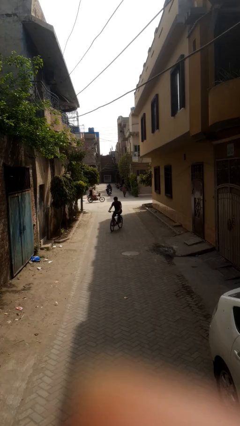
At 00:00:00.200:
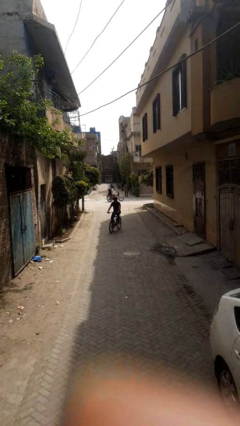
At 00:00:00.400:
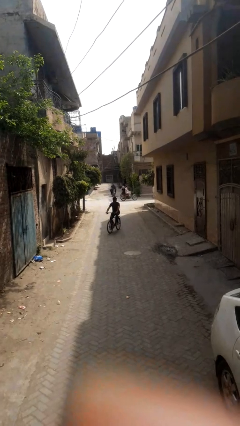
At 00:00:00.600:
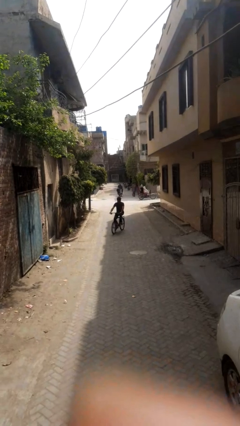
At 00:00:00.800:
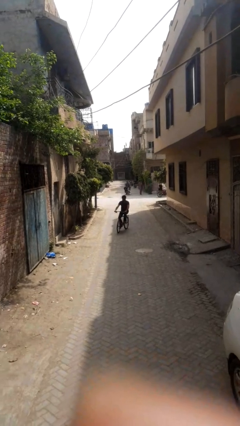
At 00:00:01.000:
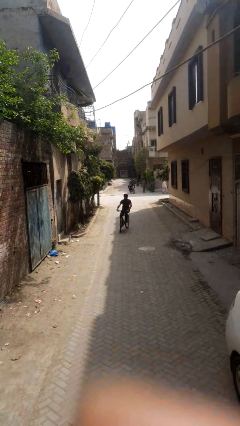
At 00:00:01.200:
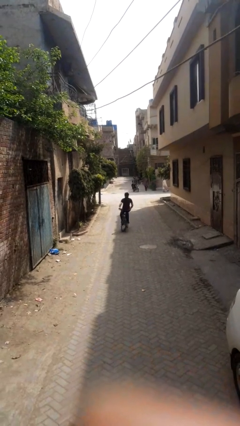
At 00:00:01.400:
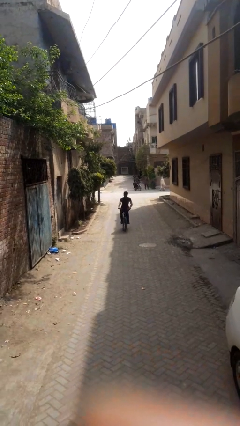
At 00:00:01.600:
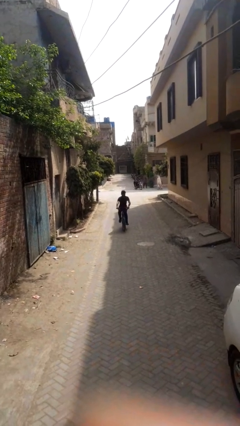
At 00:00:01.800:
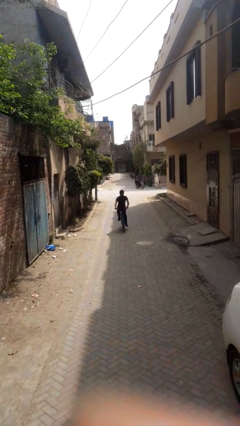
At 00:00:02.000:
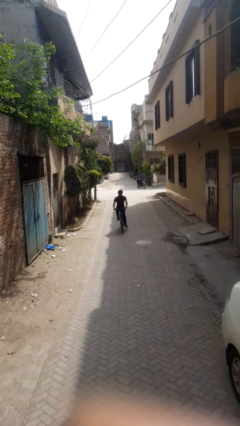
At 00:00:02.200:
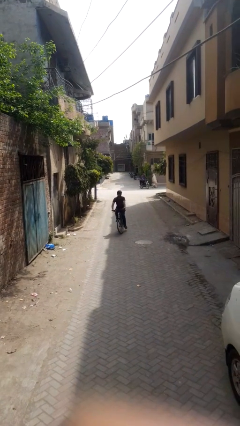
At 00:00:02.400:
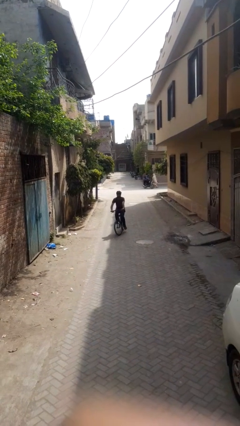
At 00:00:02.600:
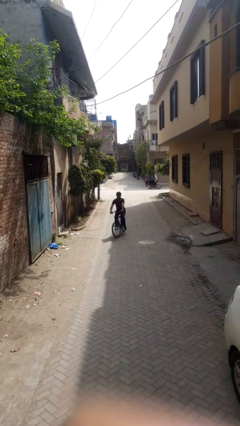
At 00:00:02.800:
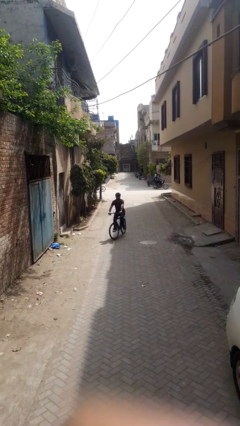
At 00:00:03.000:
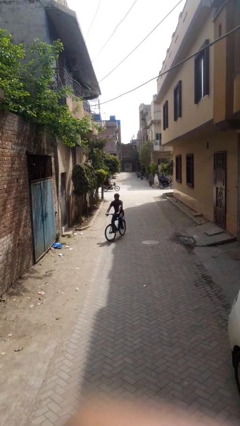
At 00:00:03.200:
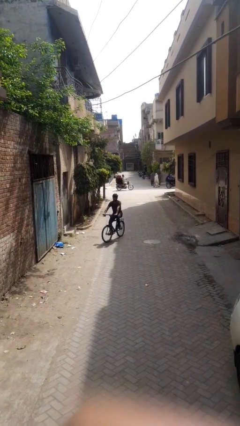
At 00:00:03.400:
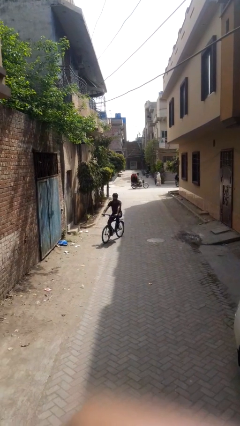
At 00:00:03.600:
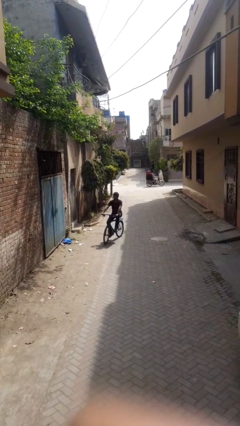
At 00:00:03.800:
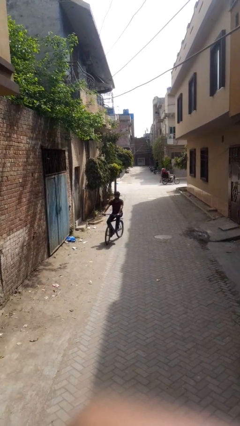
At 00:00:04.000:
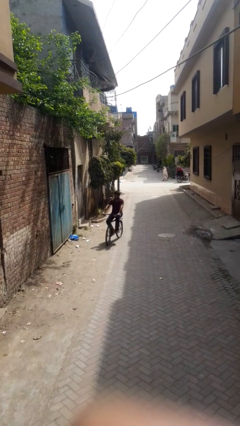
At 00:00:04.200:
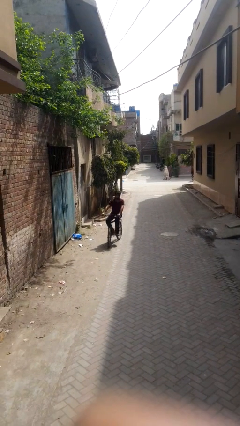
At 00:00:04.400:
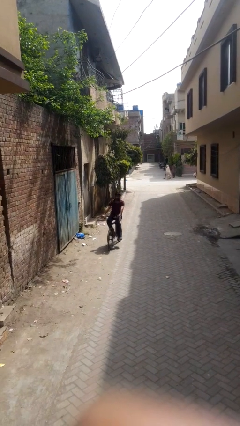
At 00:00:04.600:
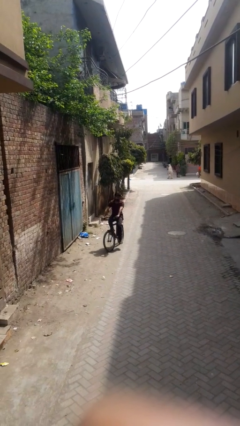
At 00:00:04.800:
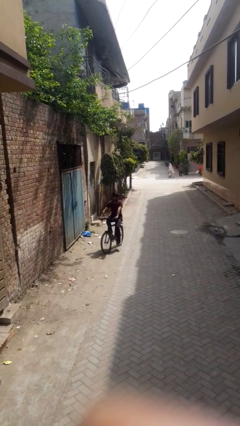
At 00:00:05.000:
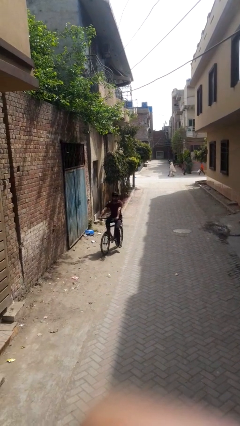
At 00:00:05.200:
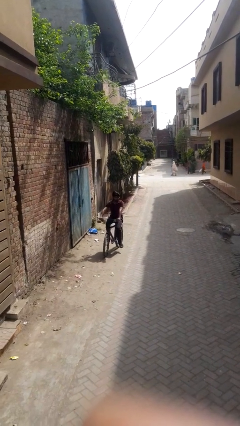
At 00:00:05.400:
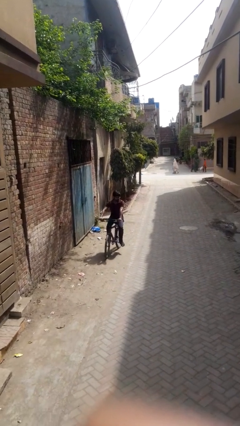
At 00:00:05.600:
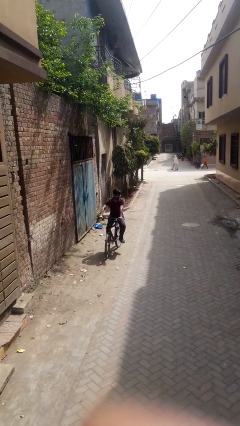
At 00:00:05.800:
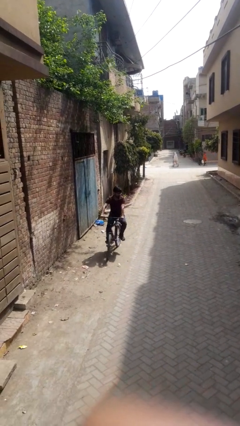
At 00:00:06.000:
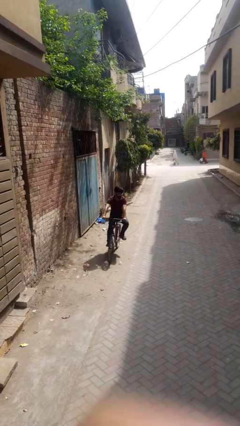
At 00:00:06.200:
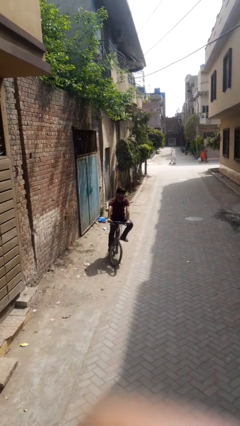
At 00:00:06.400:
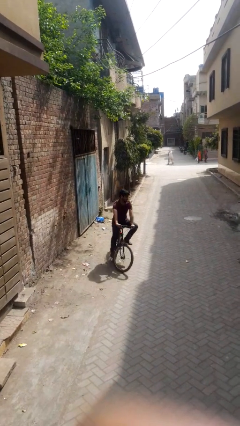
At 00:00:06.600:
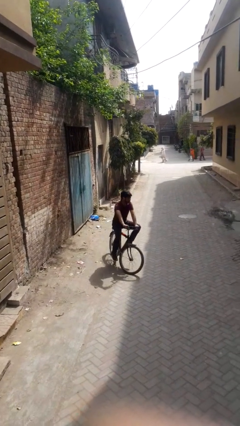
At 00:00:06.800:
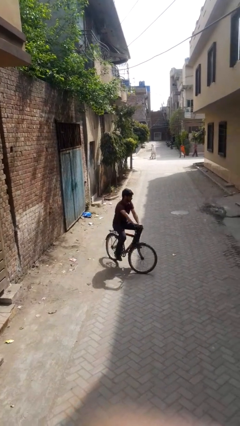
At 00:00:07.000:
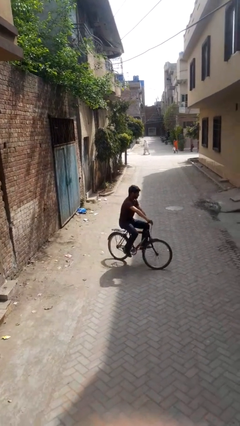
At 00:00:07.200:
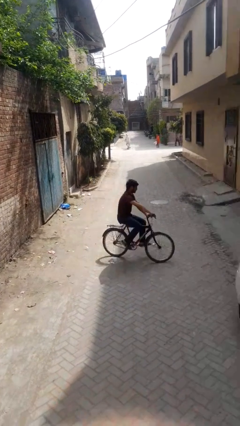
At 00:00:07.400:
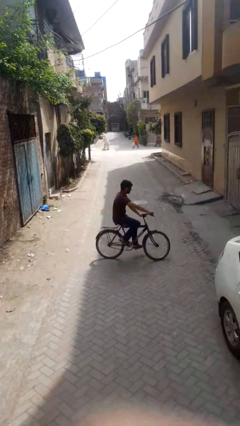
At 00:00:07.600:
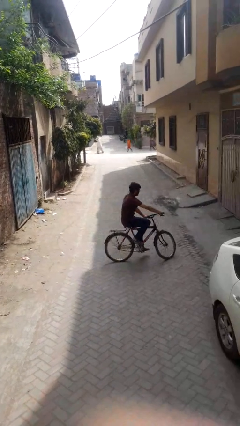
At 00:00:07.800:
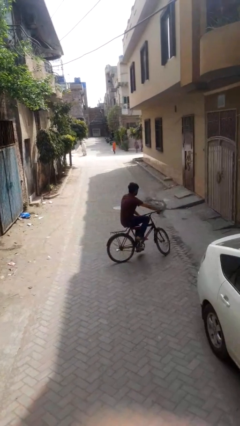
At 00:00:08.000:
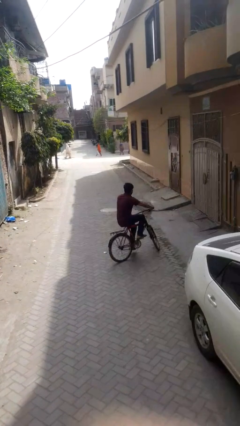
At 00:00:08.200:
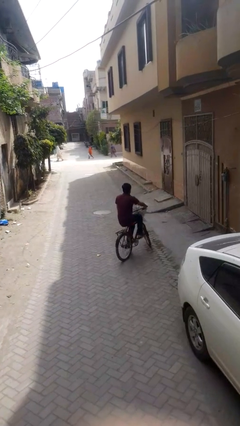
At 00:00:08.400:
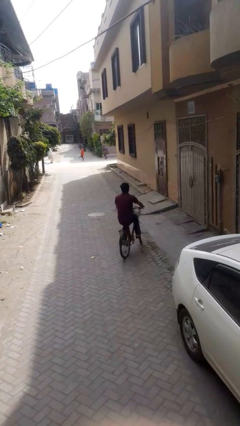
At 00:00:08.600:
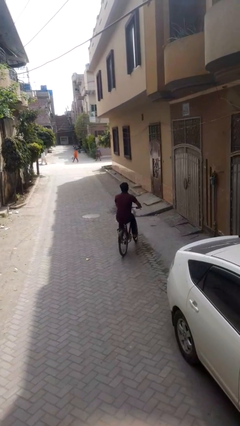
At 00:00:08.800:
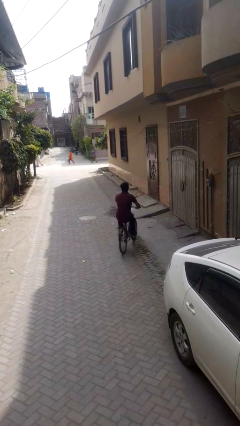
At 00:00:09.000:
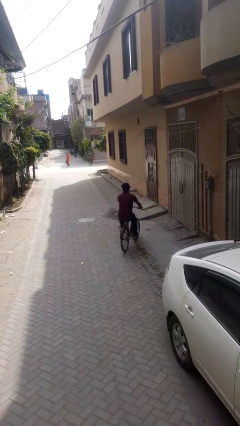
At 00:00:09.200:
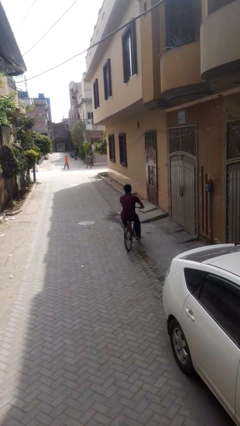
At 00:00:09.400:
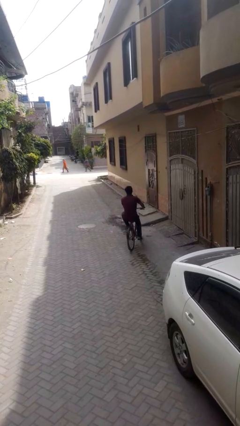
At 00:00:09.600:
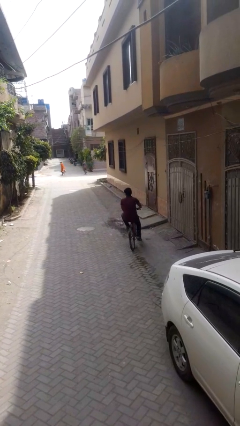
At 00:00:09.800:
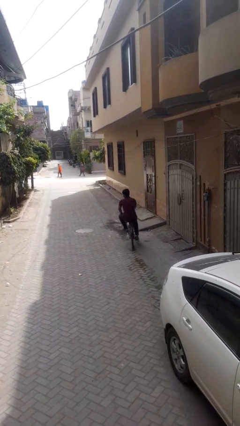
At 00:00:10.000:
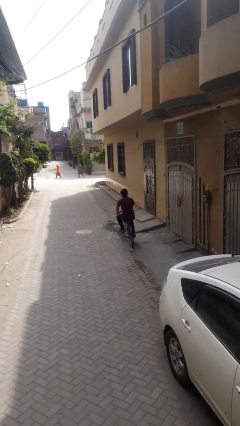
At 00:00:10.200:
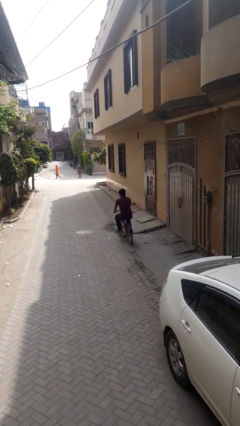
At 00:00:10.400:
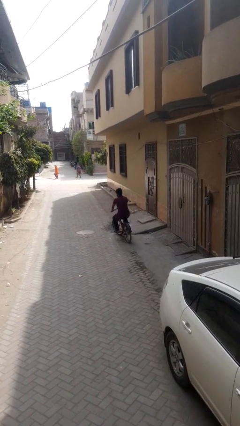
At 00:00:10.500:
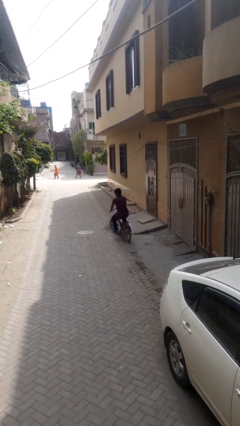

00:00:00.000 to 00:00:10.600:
person rides bicycle

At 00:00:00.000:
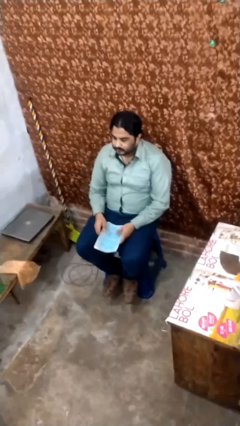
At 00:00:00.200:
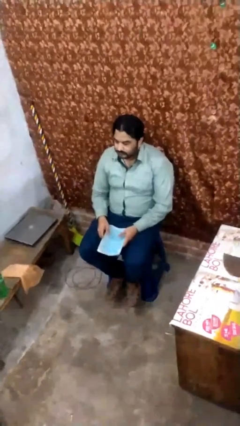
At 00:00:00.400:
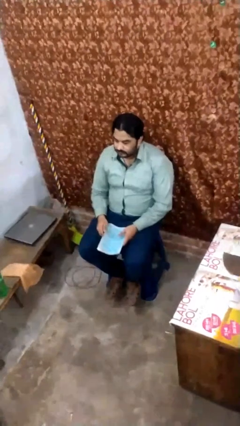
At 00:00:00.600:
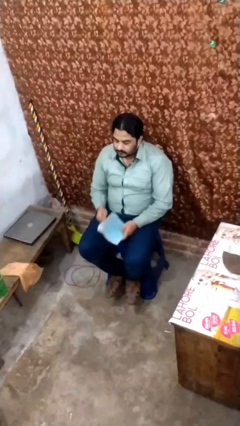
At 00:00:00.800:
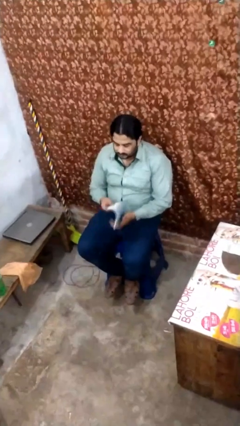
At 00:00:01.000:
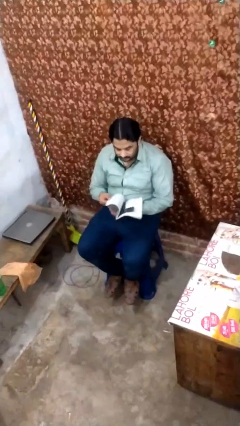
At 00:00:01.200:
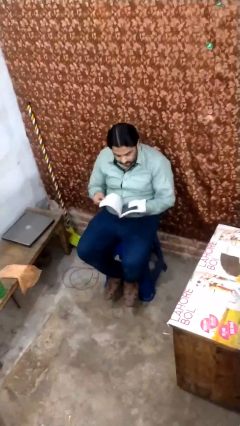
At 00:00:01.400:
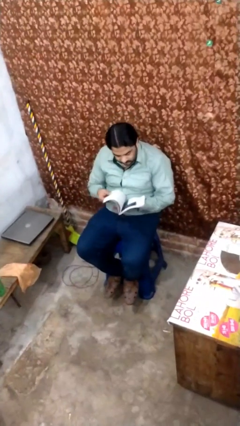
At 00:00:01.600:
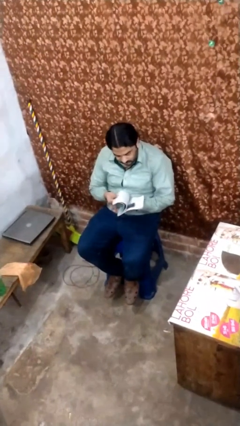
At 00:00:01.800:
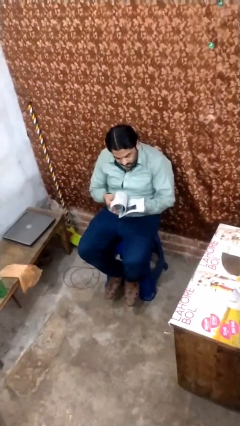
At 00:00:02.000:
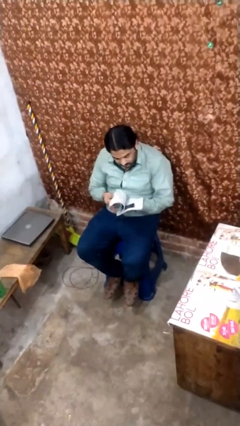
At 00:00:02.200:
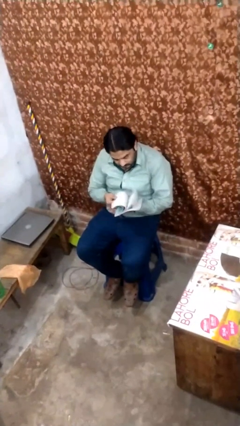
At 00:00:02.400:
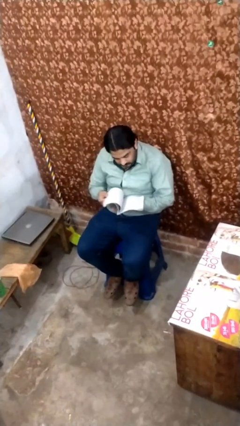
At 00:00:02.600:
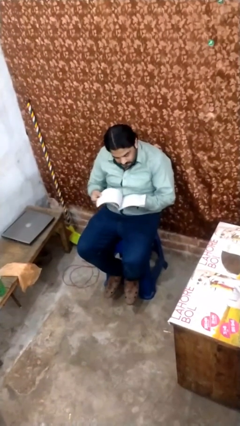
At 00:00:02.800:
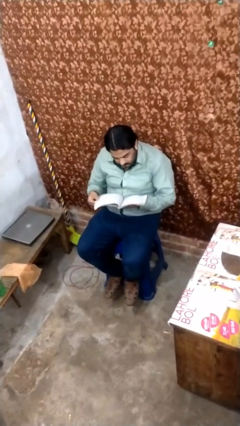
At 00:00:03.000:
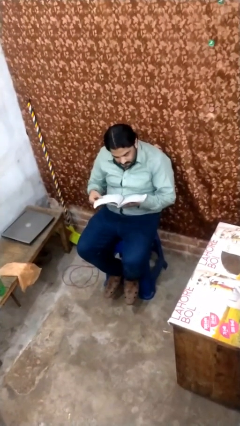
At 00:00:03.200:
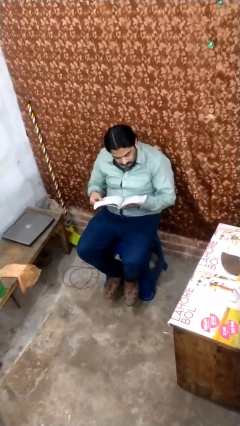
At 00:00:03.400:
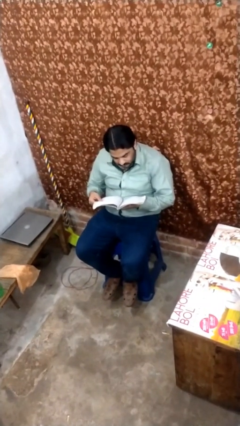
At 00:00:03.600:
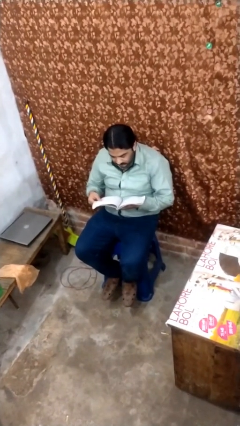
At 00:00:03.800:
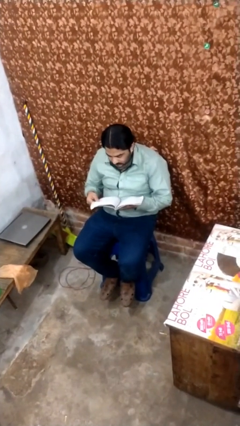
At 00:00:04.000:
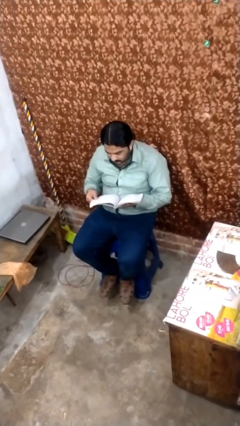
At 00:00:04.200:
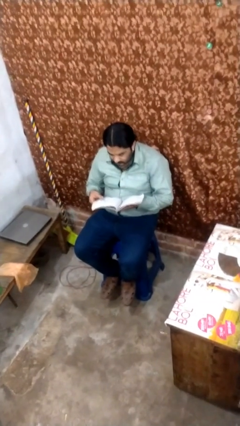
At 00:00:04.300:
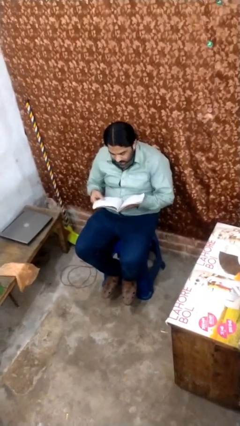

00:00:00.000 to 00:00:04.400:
person reads document

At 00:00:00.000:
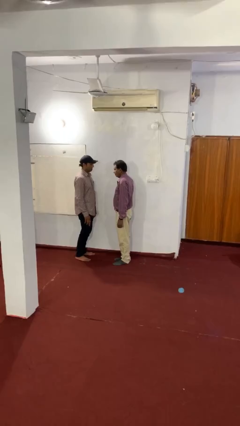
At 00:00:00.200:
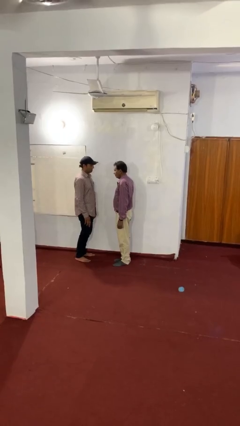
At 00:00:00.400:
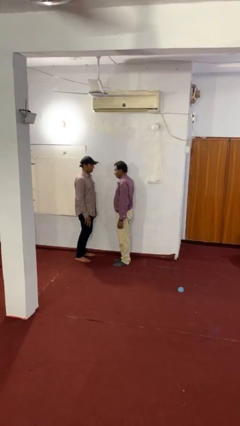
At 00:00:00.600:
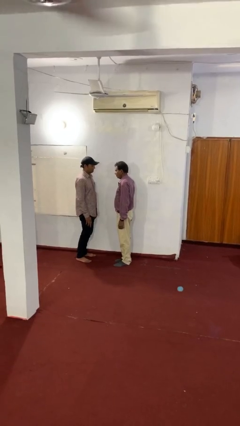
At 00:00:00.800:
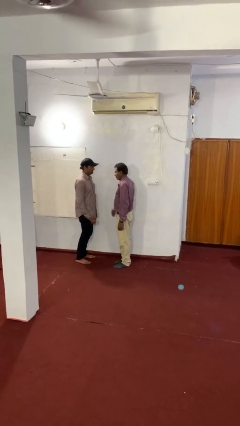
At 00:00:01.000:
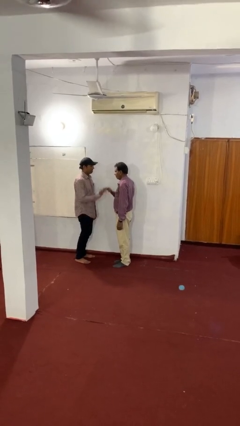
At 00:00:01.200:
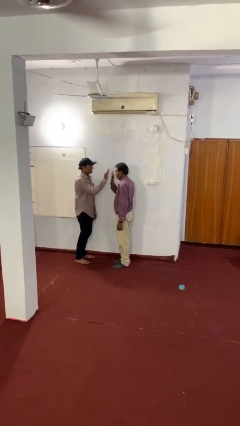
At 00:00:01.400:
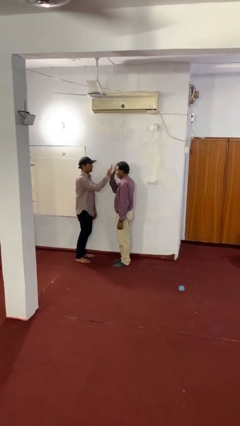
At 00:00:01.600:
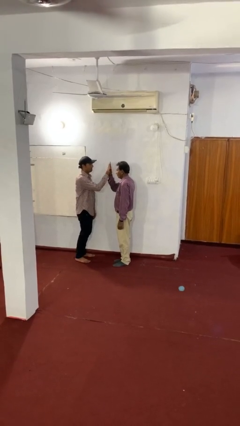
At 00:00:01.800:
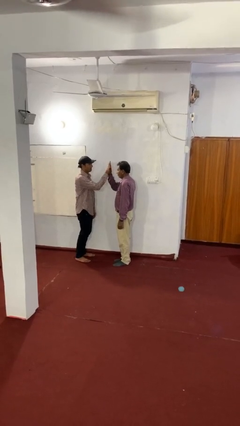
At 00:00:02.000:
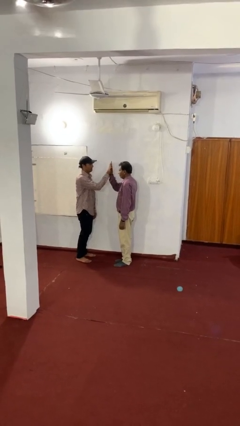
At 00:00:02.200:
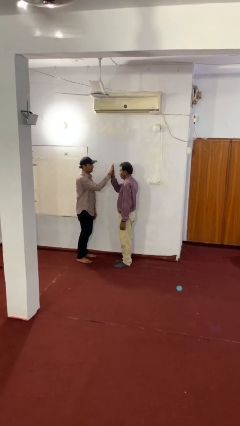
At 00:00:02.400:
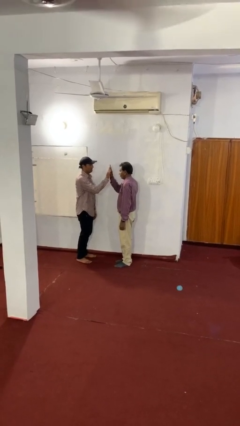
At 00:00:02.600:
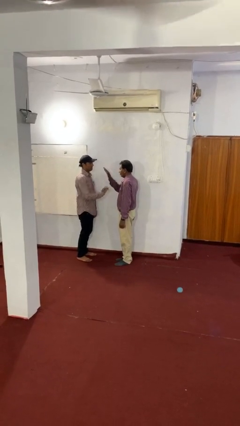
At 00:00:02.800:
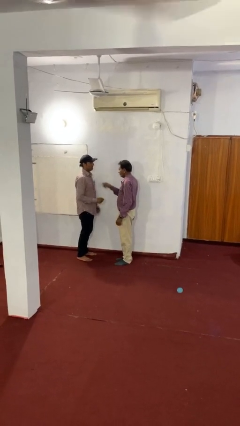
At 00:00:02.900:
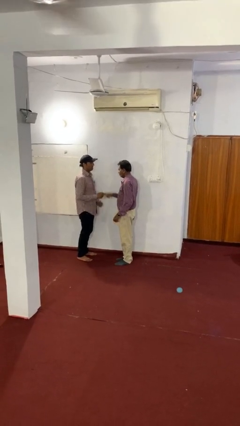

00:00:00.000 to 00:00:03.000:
person highfives hand
